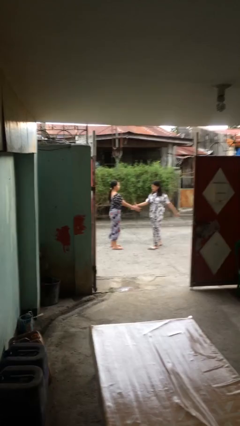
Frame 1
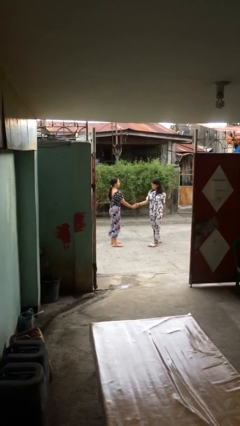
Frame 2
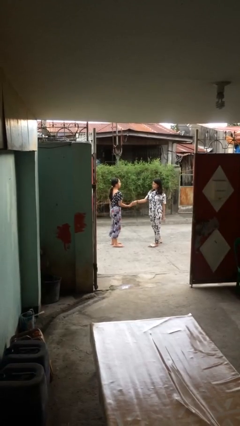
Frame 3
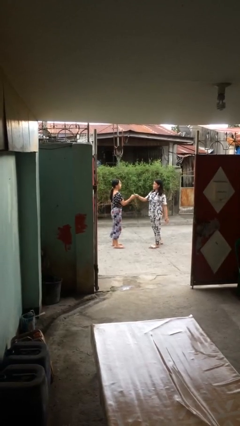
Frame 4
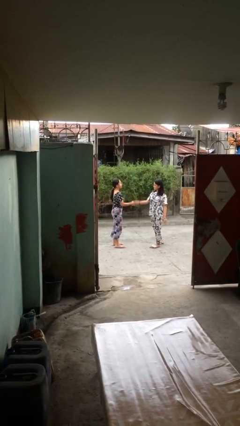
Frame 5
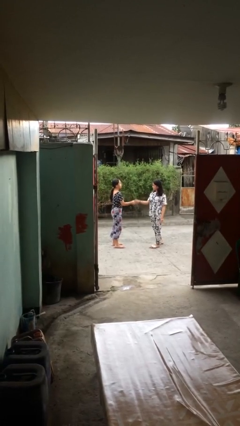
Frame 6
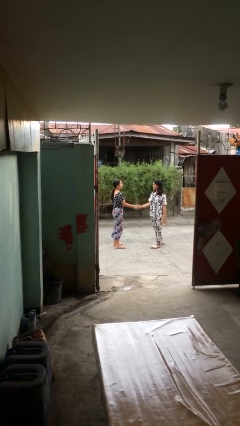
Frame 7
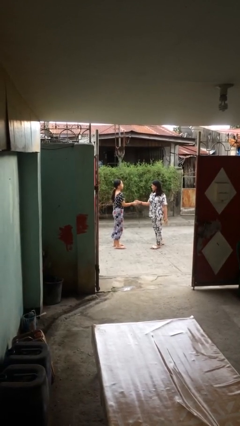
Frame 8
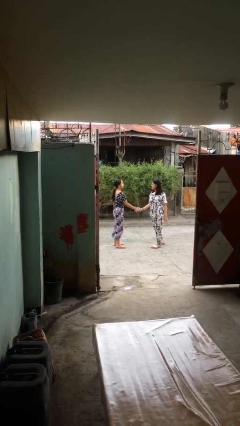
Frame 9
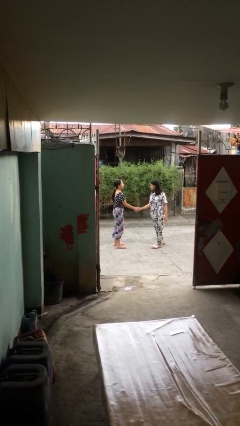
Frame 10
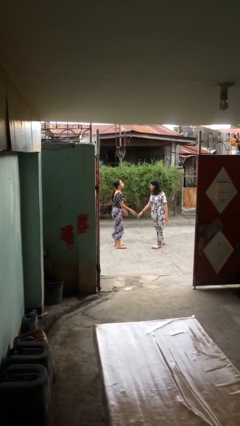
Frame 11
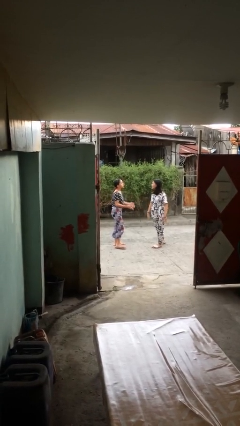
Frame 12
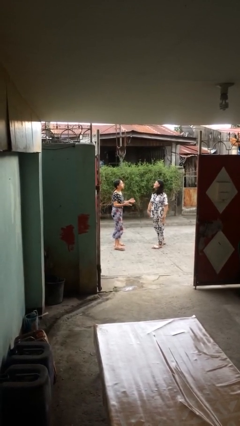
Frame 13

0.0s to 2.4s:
person shakes hand

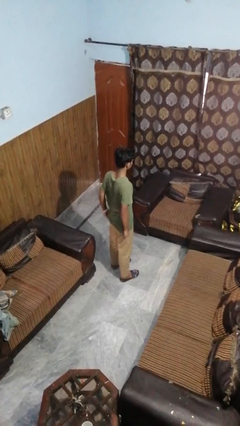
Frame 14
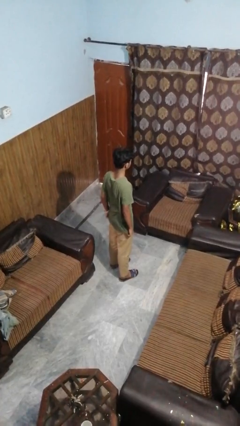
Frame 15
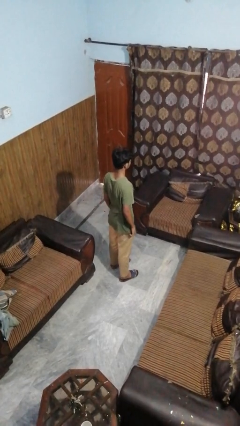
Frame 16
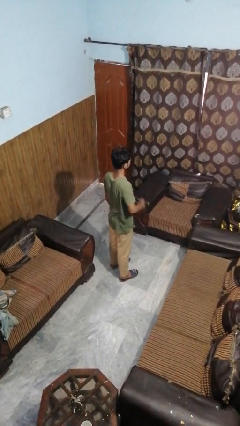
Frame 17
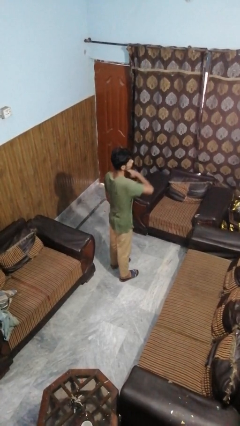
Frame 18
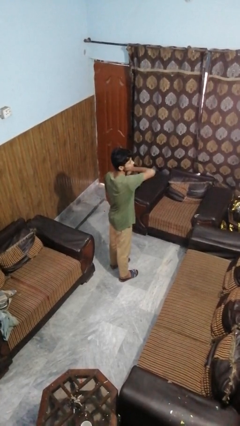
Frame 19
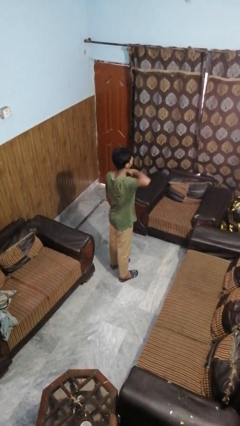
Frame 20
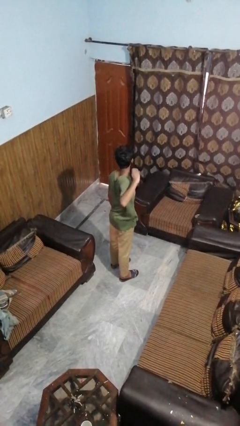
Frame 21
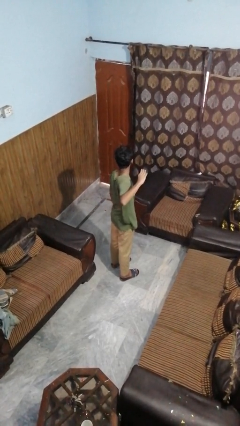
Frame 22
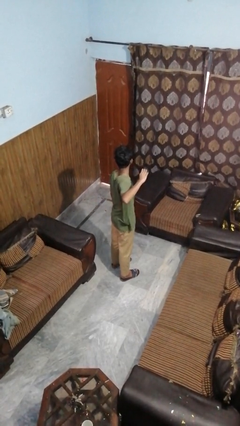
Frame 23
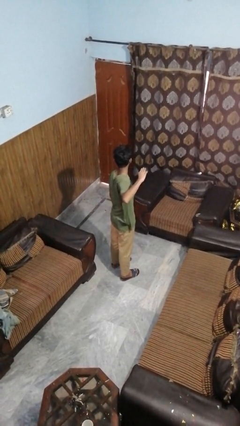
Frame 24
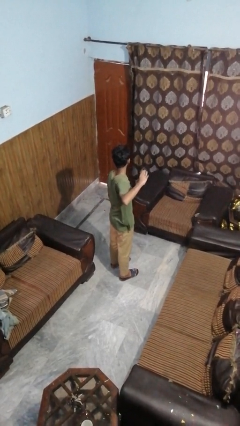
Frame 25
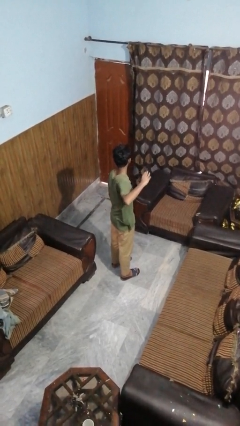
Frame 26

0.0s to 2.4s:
person gestures cut

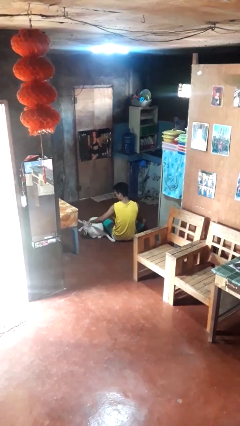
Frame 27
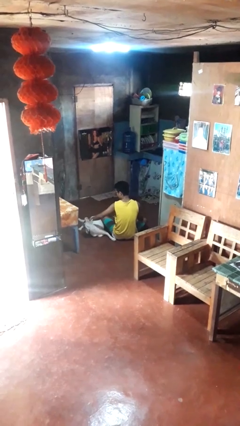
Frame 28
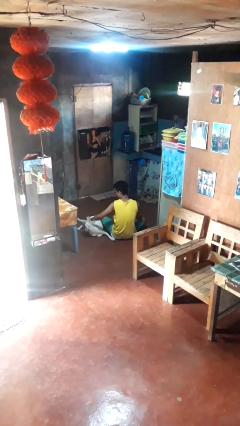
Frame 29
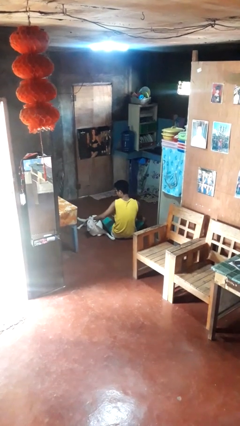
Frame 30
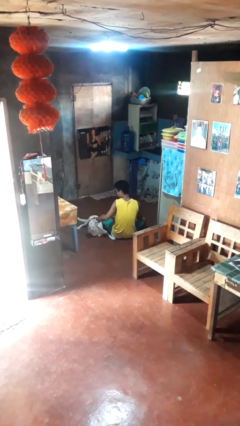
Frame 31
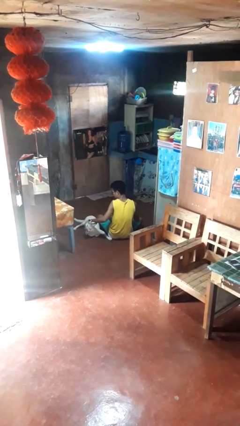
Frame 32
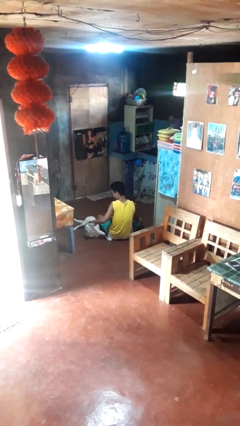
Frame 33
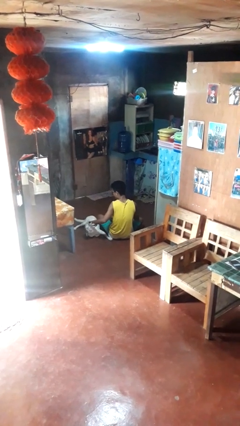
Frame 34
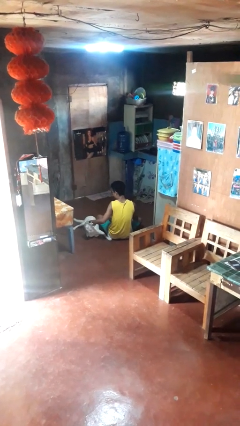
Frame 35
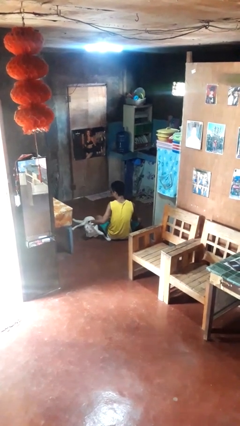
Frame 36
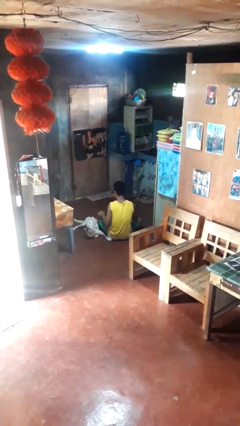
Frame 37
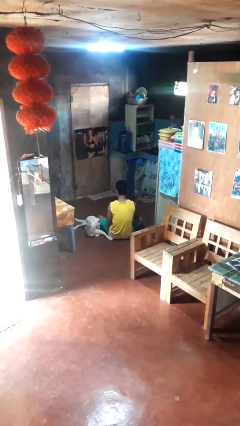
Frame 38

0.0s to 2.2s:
person pets dog

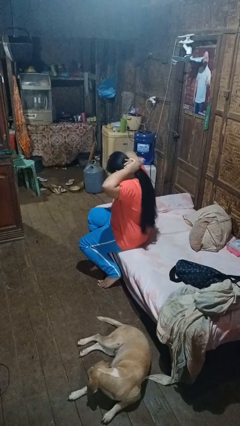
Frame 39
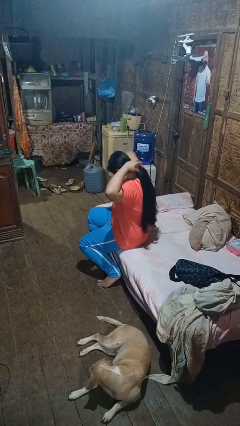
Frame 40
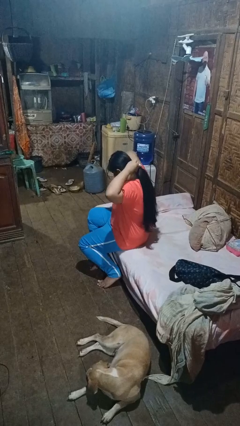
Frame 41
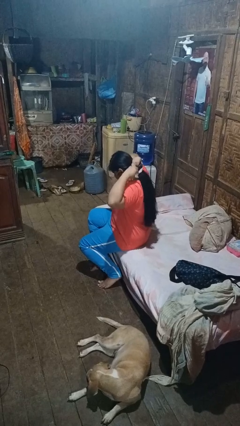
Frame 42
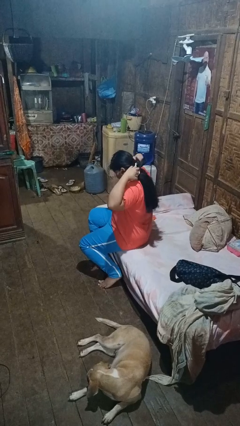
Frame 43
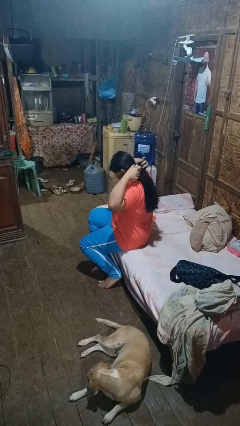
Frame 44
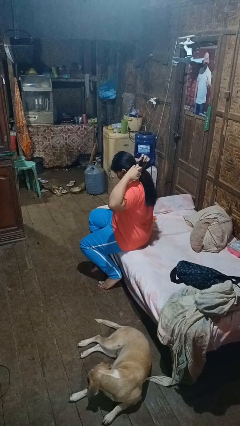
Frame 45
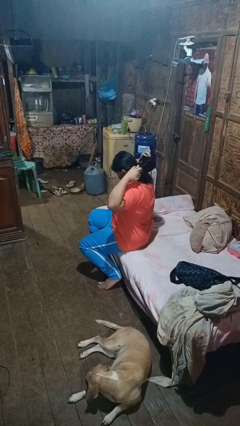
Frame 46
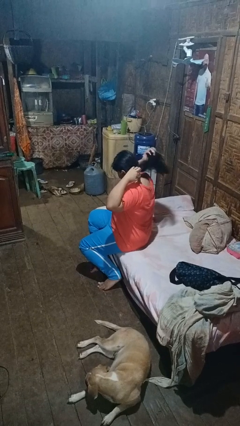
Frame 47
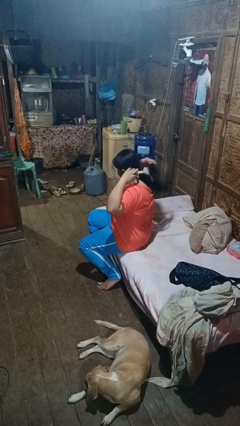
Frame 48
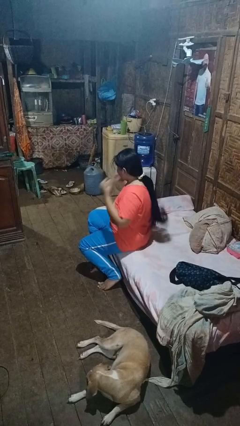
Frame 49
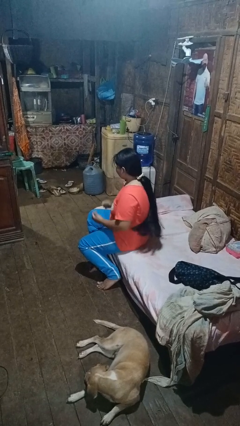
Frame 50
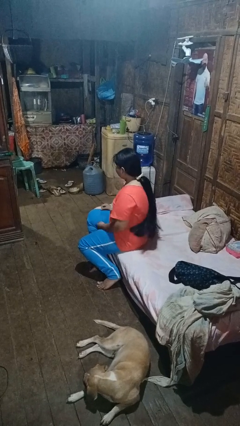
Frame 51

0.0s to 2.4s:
person puts hair in ponytail

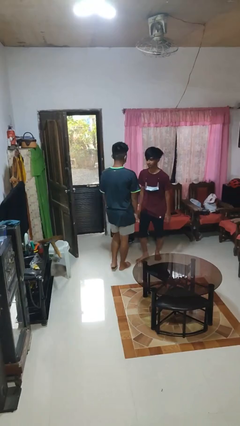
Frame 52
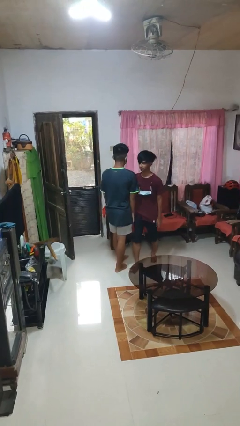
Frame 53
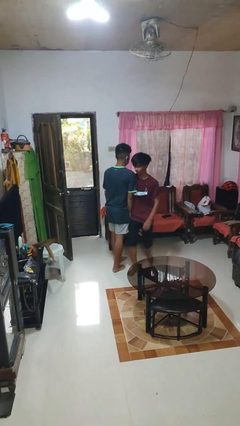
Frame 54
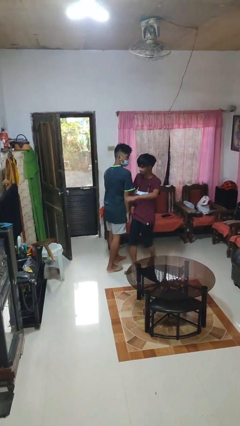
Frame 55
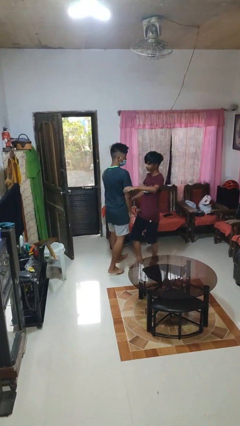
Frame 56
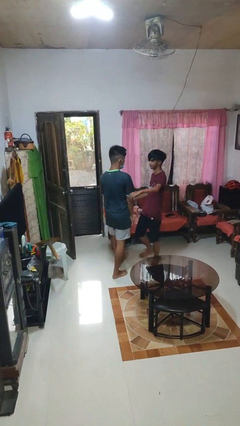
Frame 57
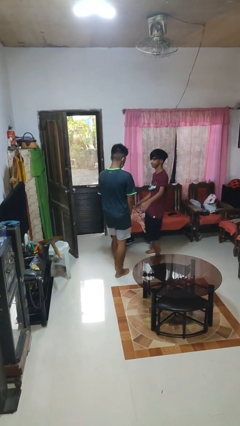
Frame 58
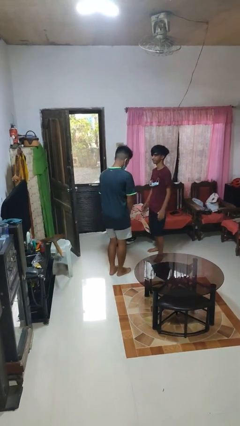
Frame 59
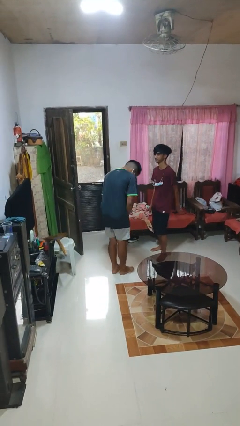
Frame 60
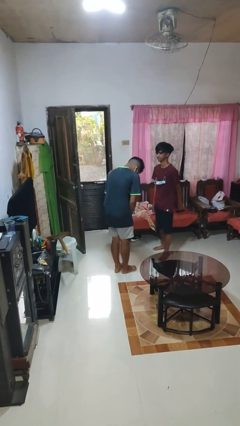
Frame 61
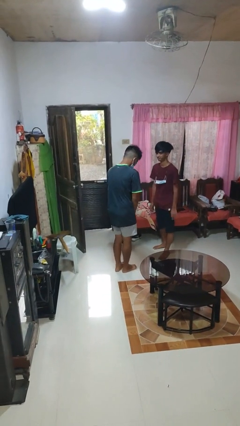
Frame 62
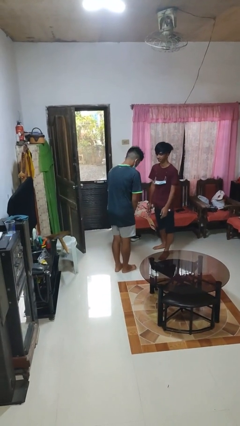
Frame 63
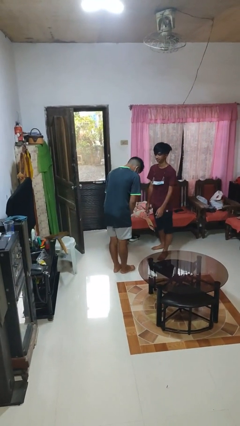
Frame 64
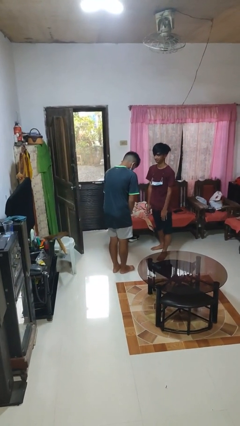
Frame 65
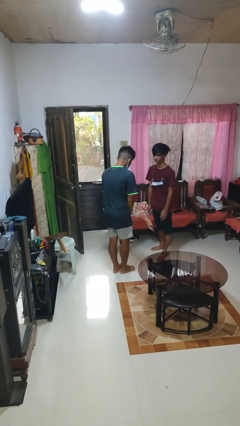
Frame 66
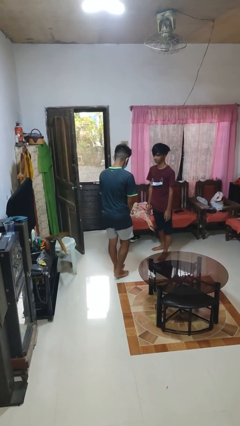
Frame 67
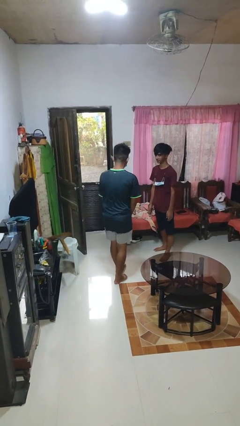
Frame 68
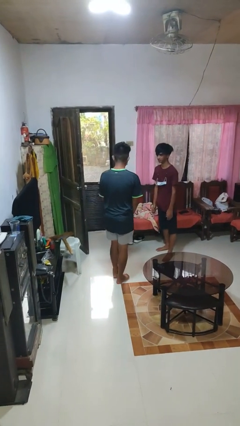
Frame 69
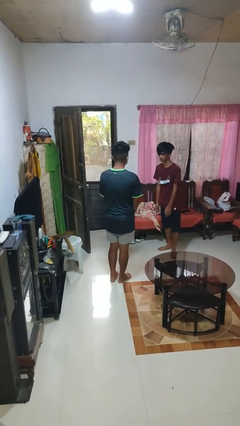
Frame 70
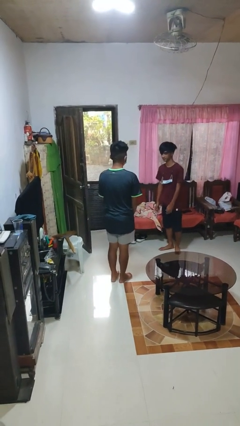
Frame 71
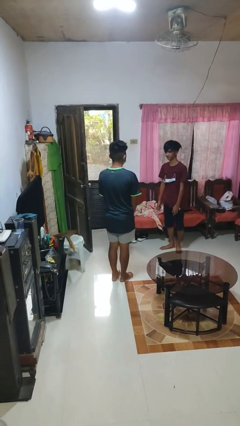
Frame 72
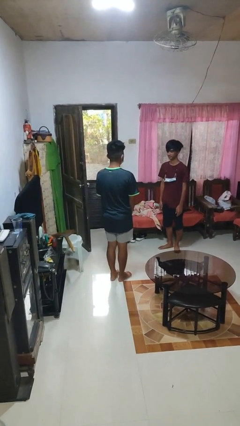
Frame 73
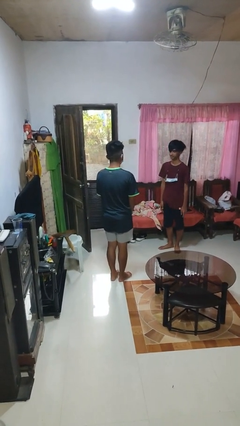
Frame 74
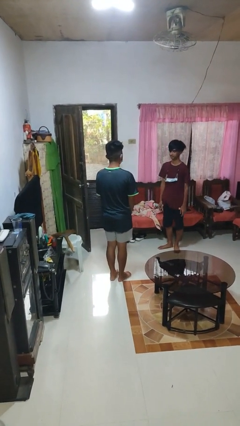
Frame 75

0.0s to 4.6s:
person bumps into person

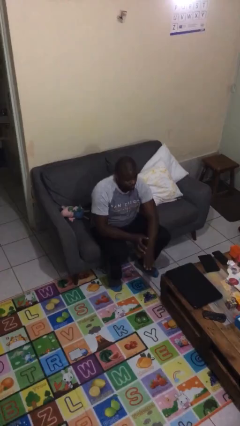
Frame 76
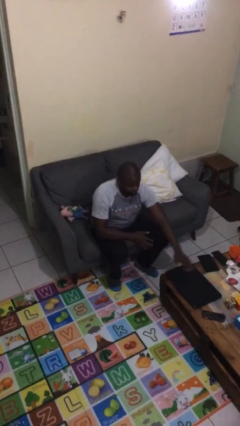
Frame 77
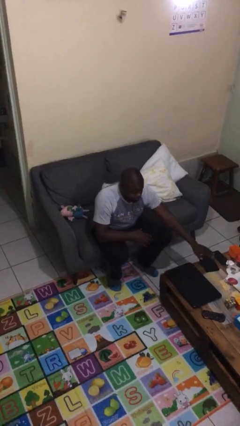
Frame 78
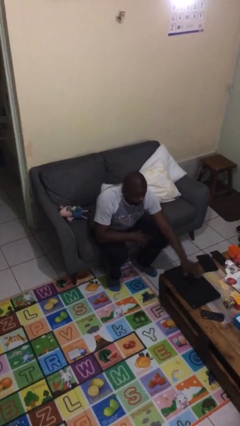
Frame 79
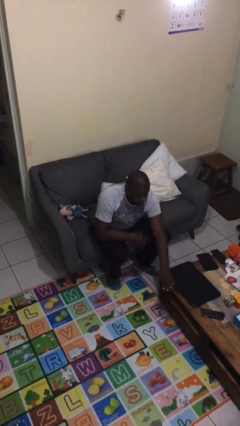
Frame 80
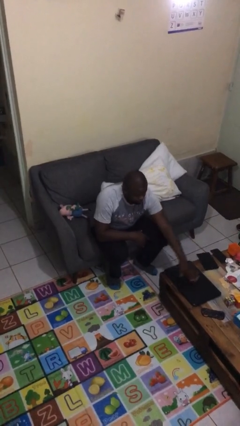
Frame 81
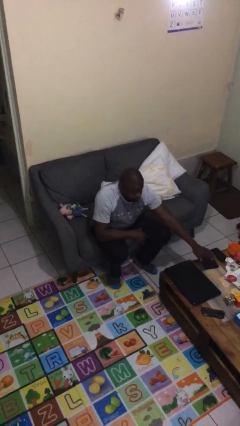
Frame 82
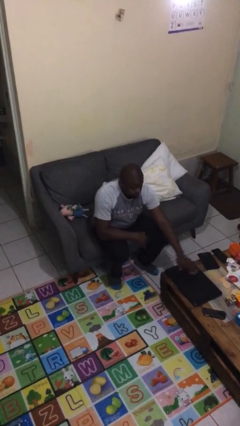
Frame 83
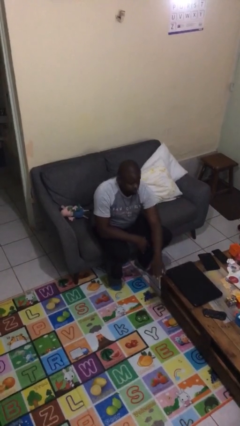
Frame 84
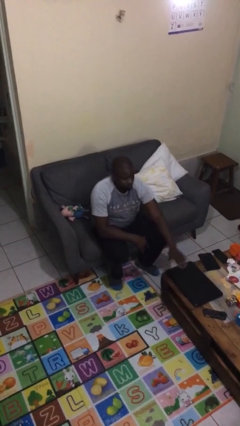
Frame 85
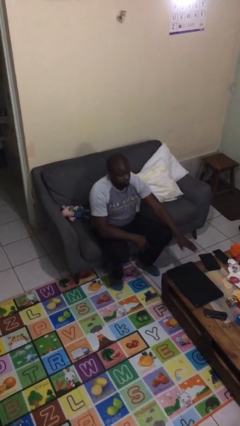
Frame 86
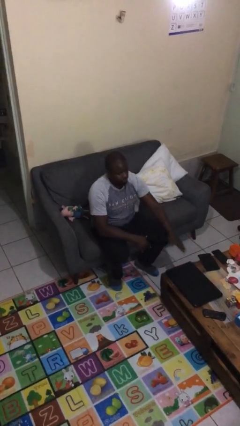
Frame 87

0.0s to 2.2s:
person waves hand over object

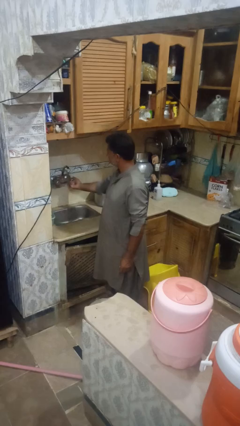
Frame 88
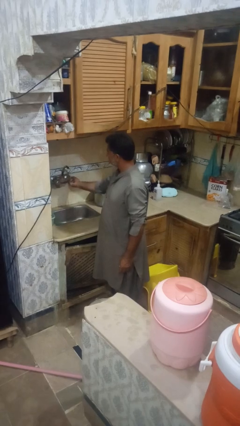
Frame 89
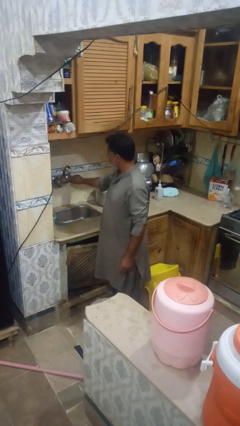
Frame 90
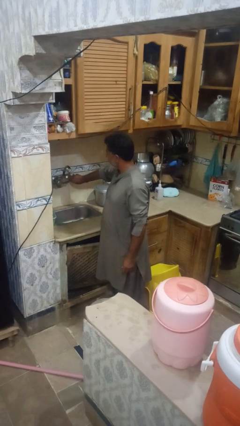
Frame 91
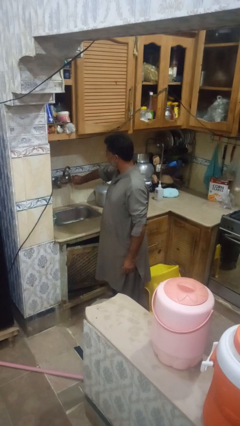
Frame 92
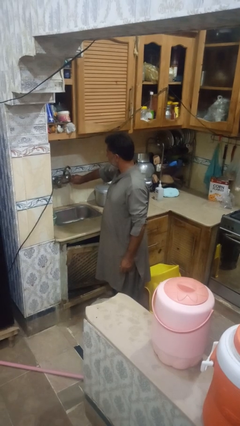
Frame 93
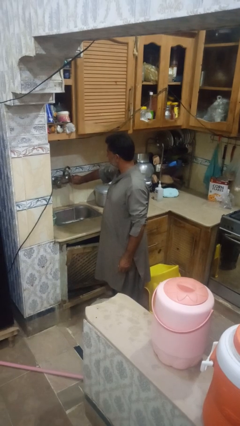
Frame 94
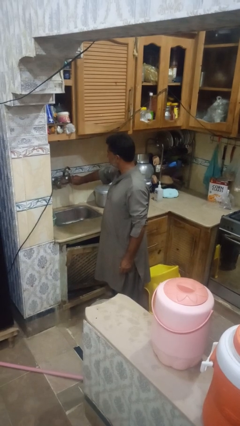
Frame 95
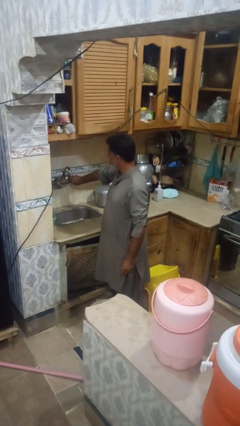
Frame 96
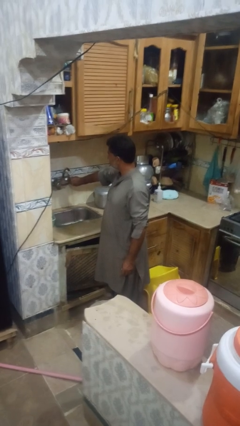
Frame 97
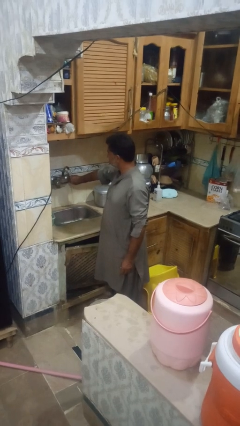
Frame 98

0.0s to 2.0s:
person turns on faucet
